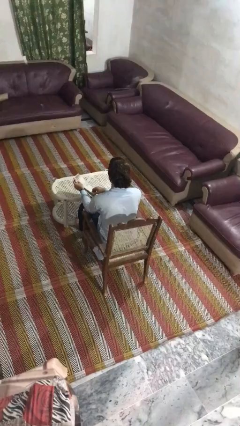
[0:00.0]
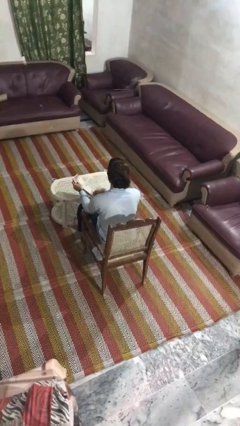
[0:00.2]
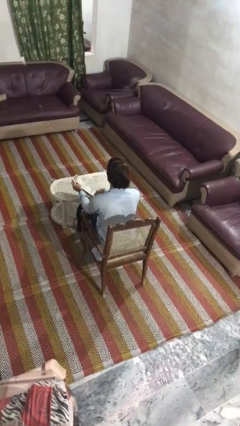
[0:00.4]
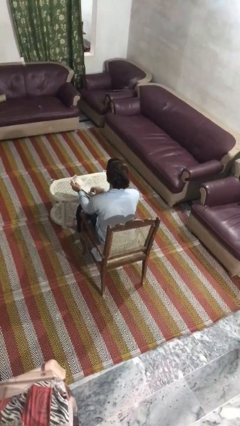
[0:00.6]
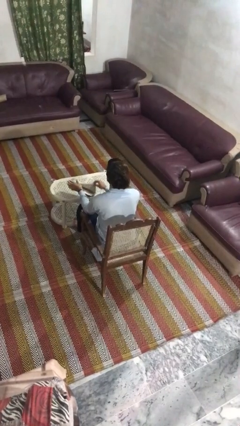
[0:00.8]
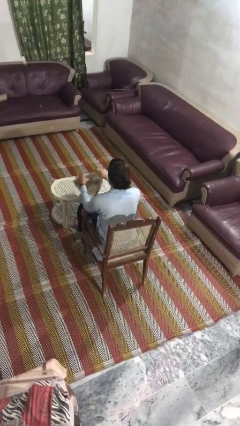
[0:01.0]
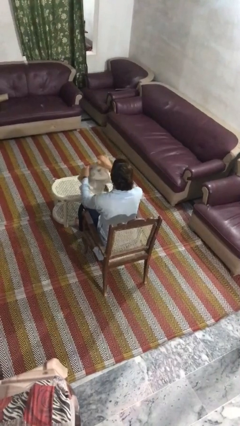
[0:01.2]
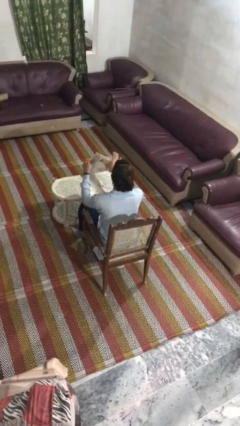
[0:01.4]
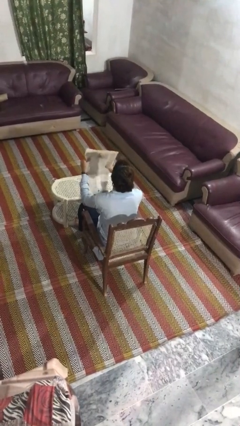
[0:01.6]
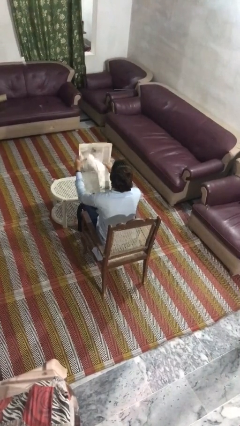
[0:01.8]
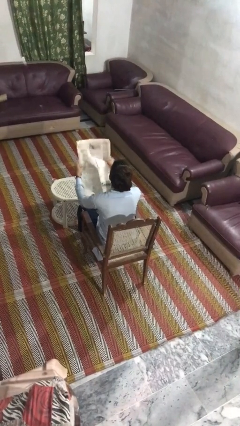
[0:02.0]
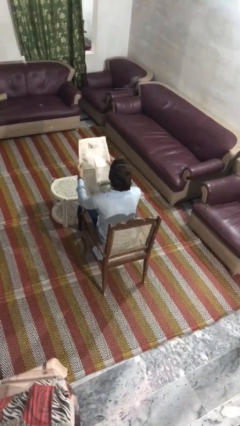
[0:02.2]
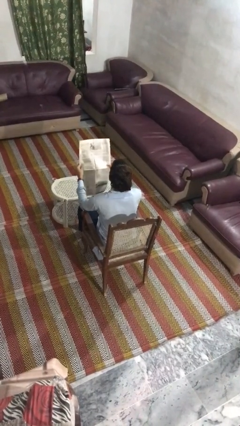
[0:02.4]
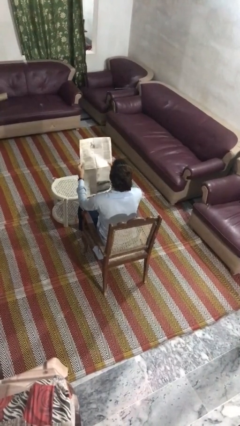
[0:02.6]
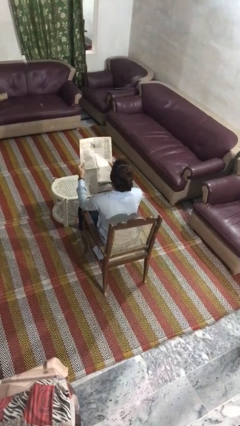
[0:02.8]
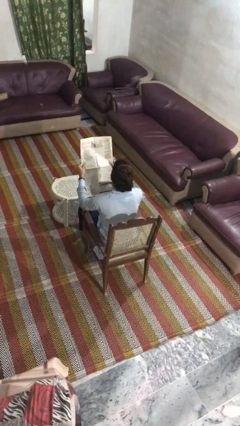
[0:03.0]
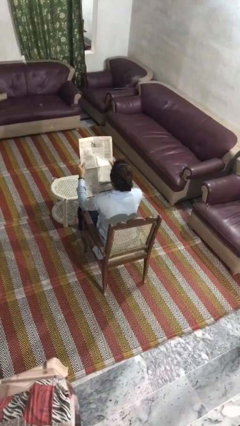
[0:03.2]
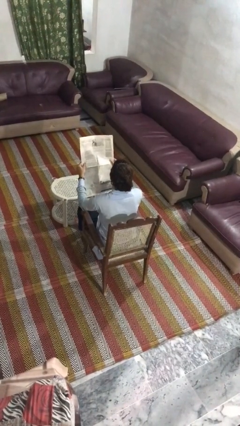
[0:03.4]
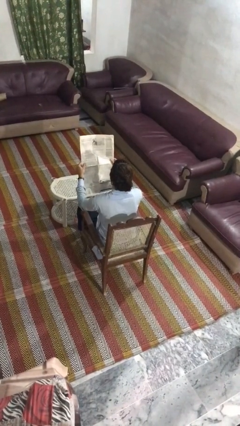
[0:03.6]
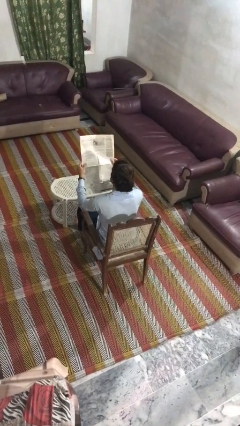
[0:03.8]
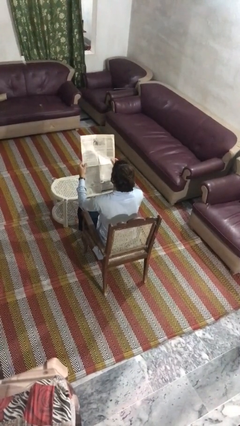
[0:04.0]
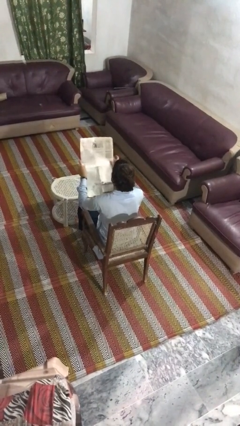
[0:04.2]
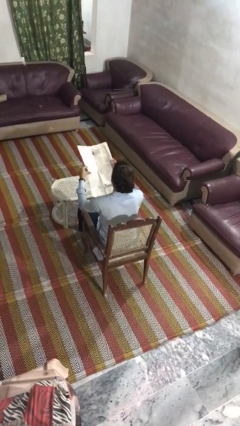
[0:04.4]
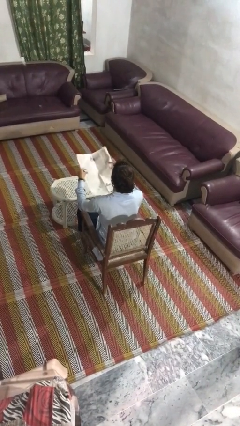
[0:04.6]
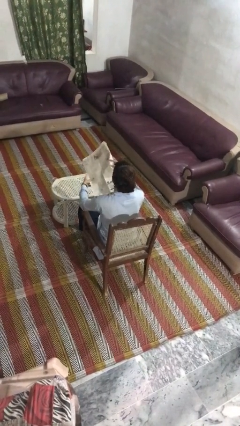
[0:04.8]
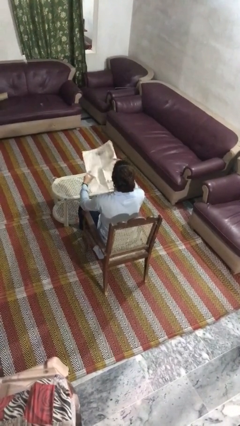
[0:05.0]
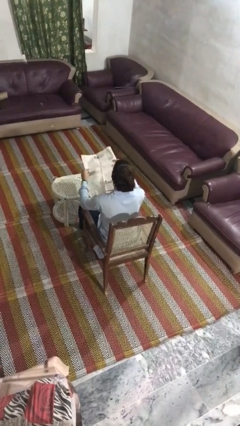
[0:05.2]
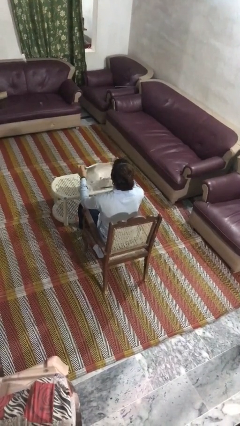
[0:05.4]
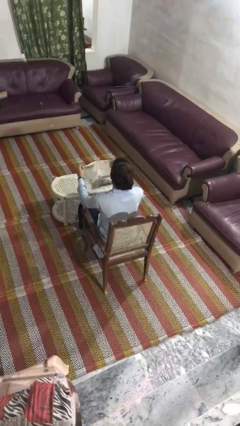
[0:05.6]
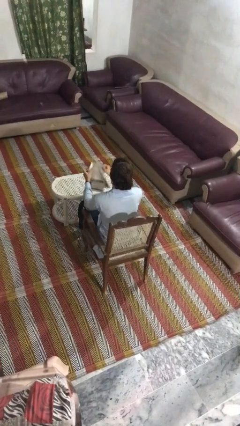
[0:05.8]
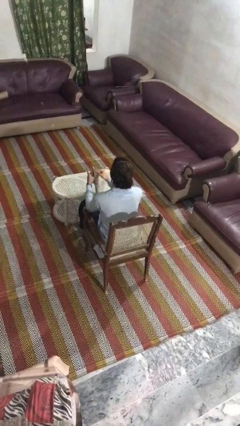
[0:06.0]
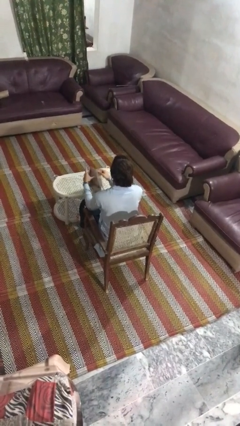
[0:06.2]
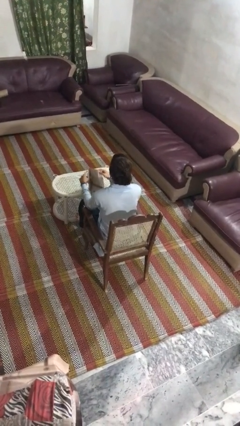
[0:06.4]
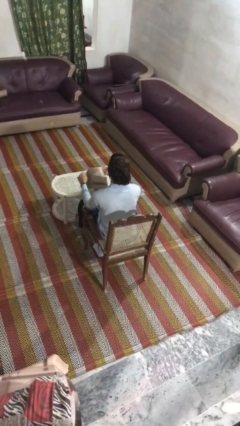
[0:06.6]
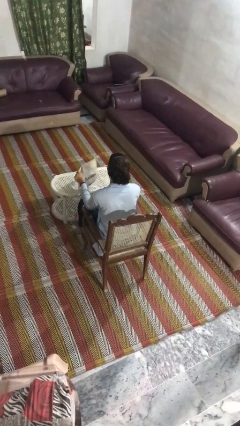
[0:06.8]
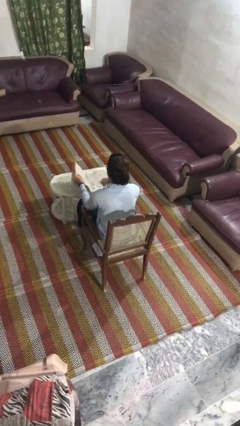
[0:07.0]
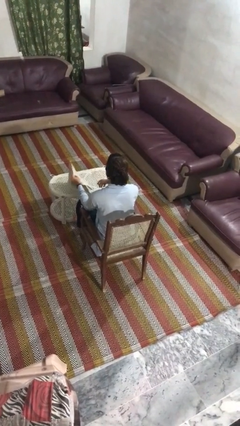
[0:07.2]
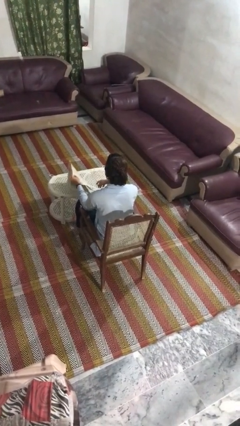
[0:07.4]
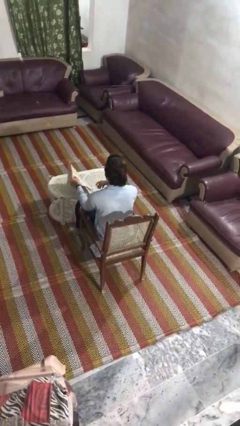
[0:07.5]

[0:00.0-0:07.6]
person reads newspaper

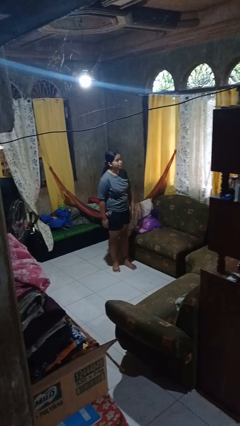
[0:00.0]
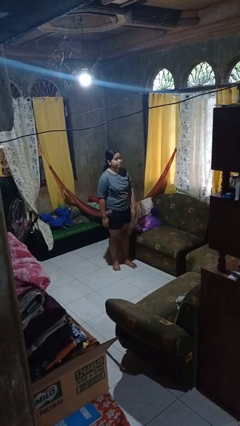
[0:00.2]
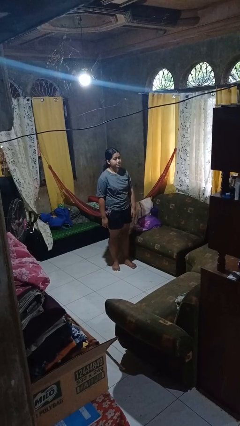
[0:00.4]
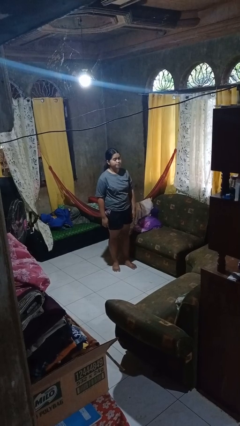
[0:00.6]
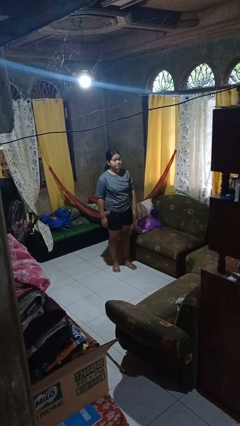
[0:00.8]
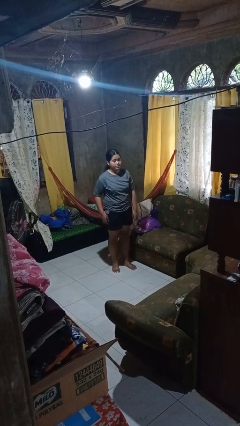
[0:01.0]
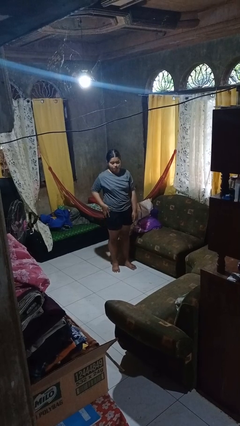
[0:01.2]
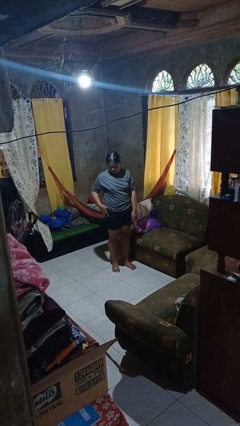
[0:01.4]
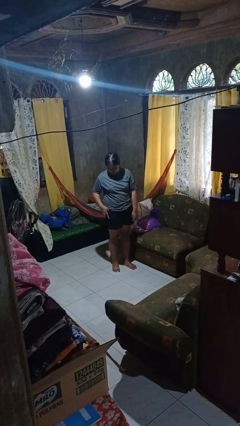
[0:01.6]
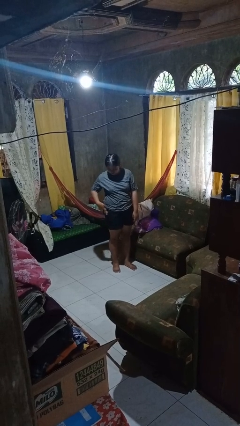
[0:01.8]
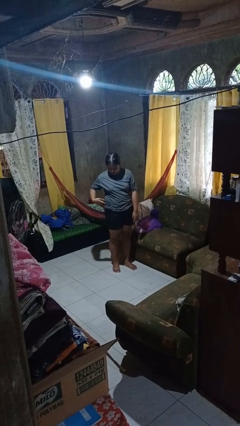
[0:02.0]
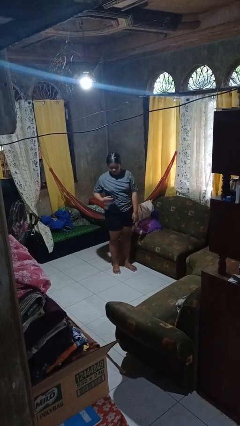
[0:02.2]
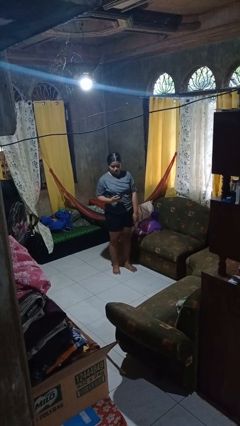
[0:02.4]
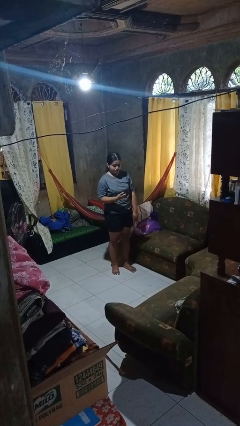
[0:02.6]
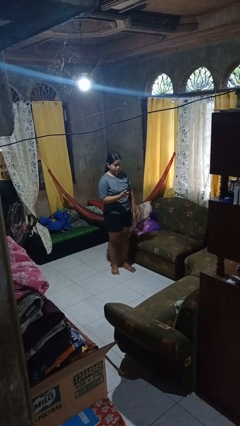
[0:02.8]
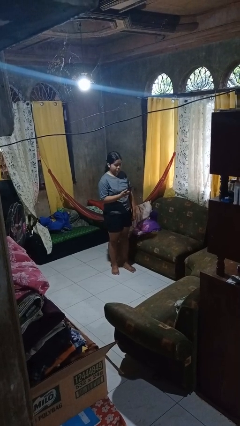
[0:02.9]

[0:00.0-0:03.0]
person takes phone from pocket

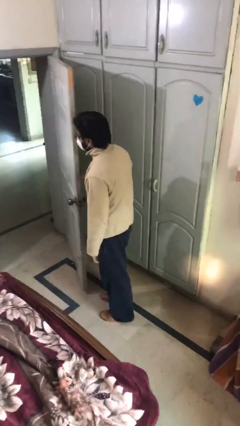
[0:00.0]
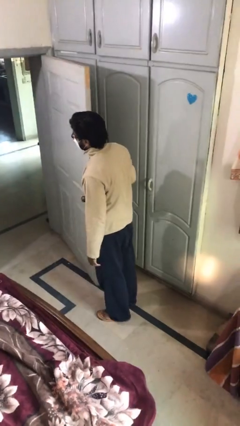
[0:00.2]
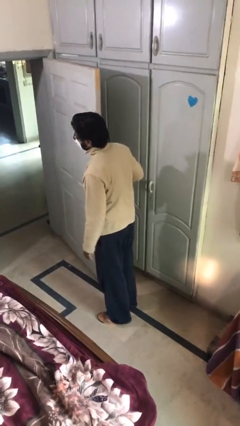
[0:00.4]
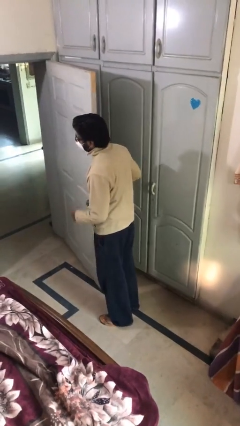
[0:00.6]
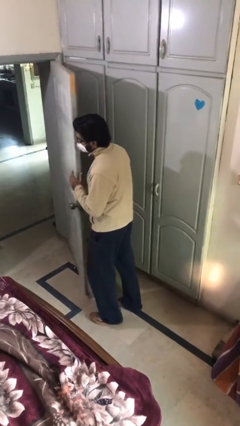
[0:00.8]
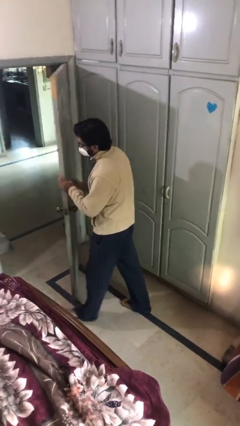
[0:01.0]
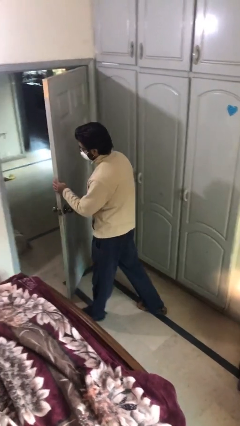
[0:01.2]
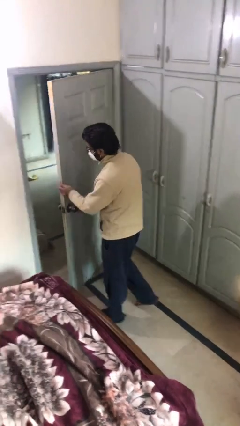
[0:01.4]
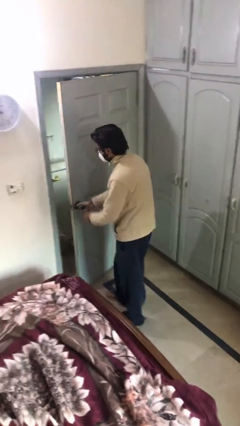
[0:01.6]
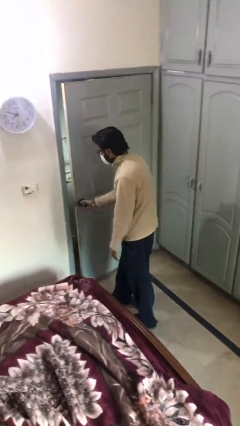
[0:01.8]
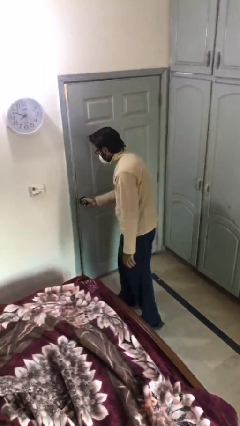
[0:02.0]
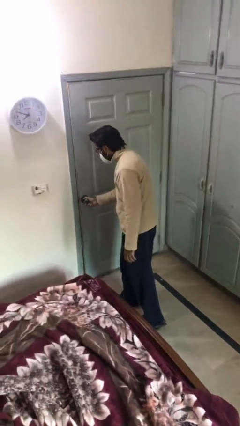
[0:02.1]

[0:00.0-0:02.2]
person closes facility door

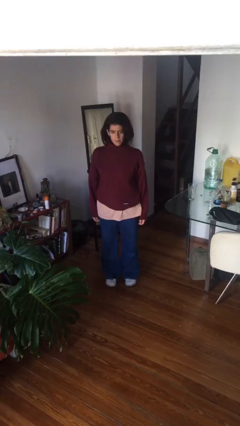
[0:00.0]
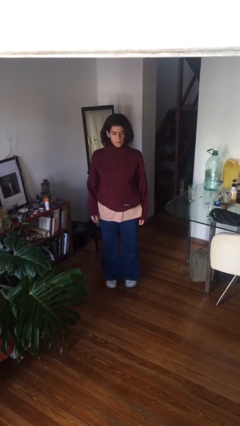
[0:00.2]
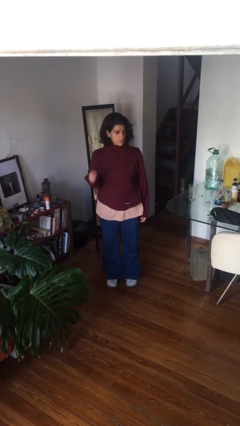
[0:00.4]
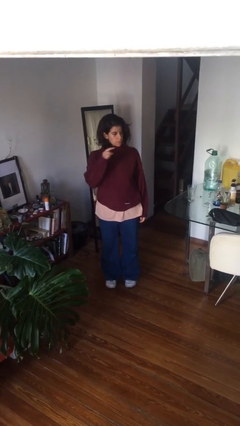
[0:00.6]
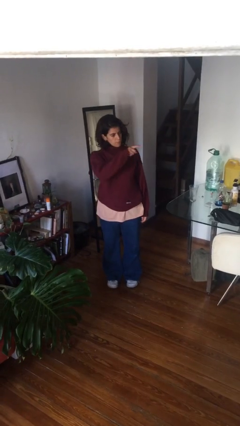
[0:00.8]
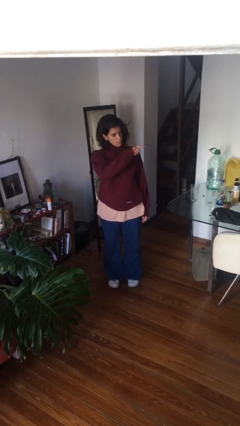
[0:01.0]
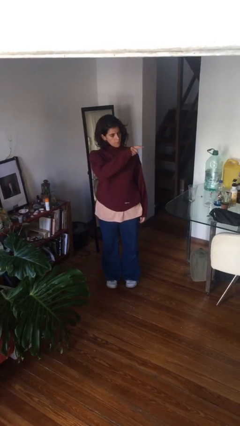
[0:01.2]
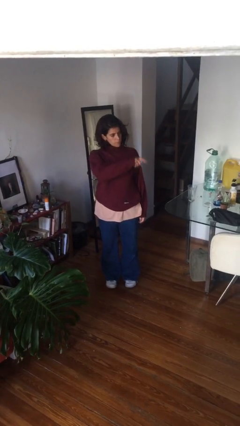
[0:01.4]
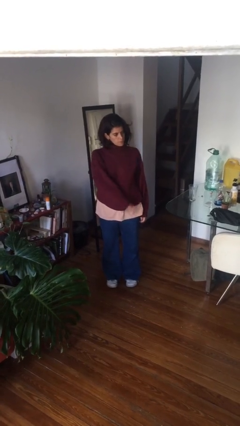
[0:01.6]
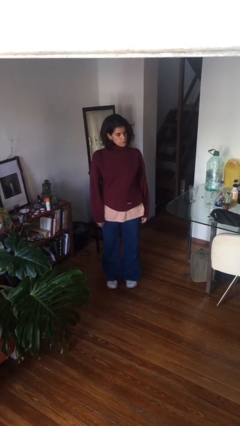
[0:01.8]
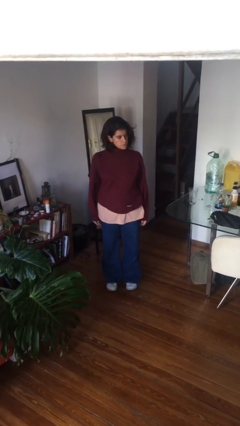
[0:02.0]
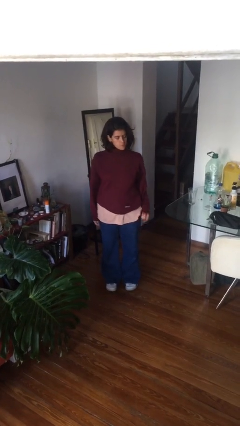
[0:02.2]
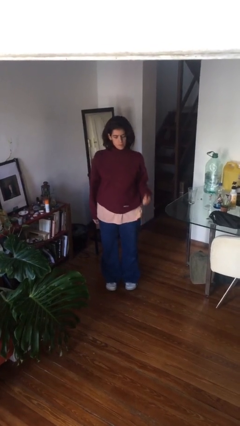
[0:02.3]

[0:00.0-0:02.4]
person gestures swipe left

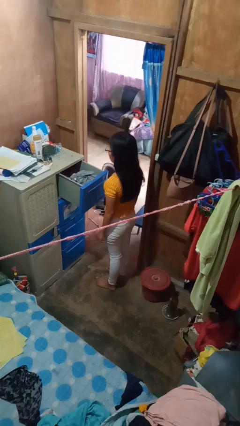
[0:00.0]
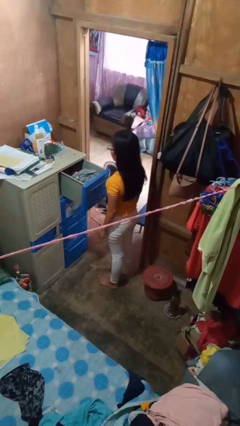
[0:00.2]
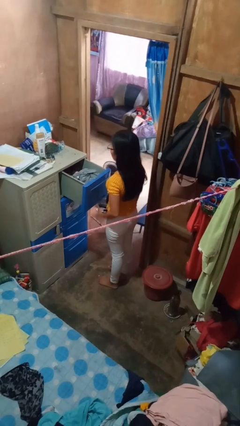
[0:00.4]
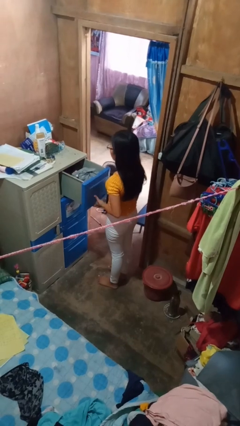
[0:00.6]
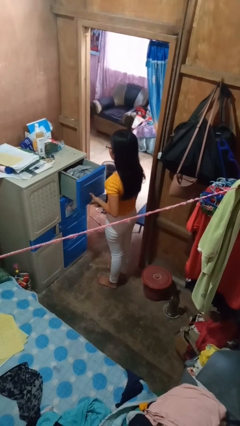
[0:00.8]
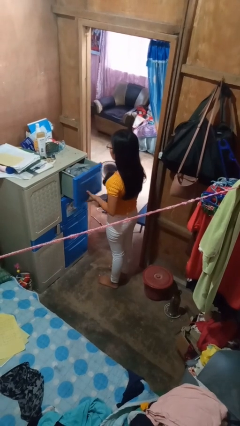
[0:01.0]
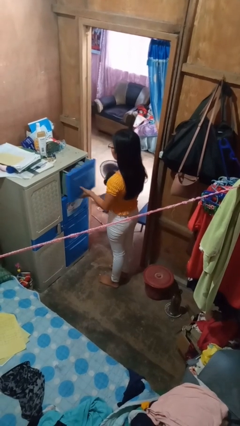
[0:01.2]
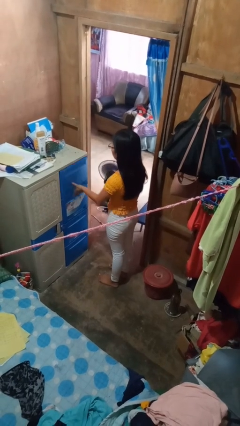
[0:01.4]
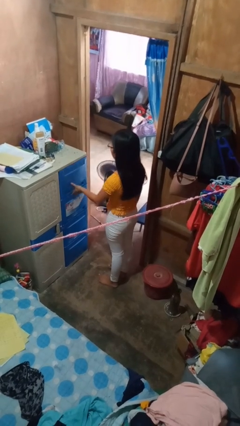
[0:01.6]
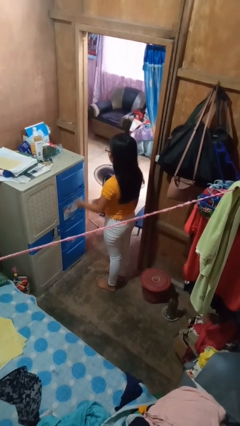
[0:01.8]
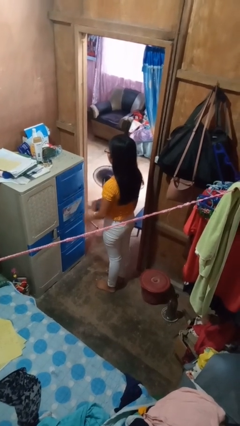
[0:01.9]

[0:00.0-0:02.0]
person closes dresser drawer

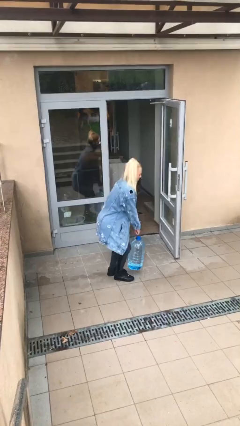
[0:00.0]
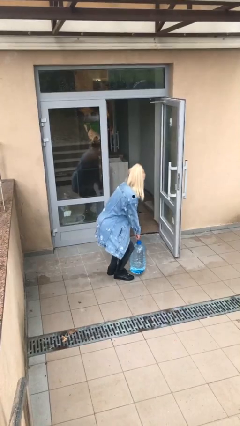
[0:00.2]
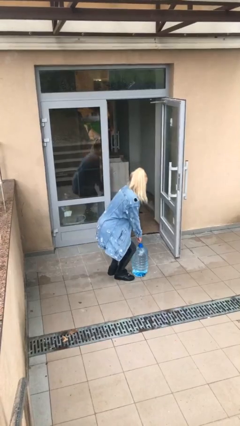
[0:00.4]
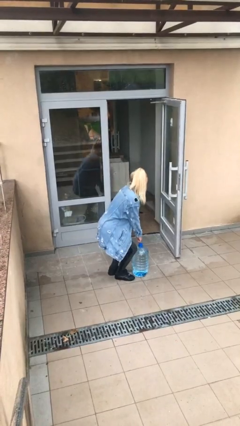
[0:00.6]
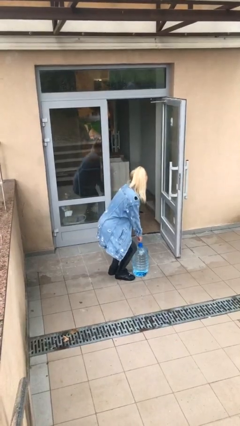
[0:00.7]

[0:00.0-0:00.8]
person puts down object on floor
